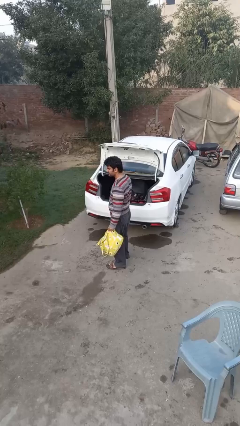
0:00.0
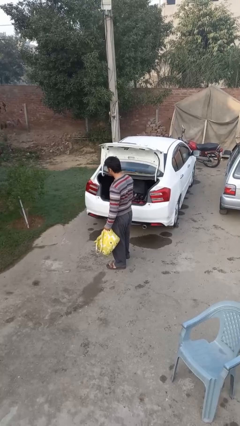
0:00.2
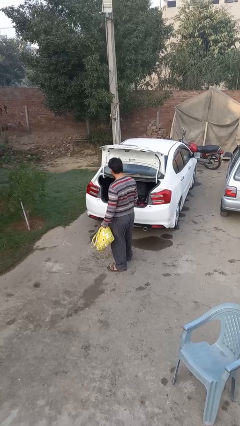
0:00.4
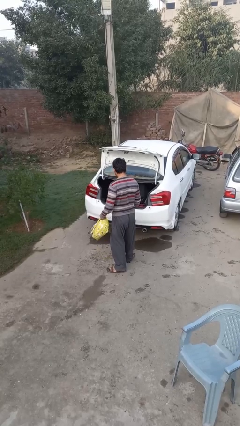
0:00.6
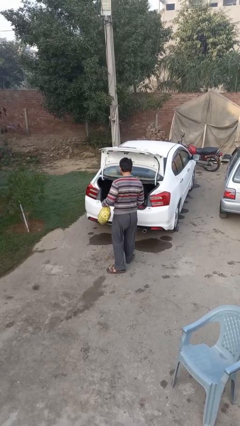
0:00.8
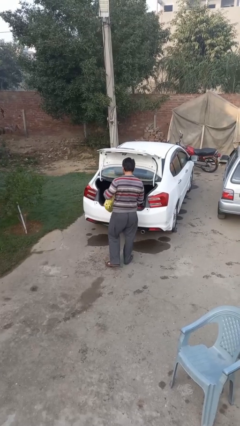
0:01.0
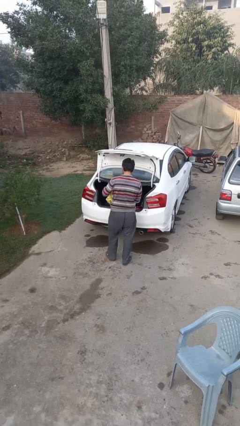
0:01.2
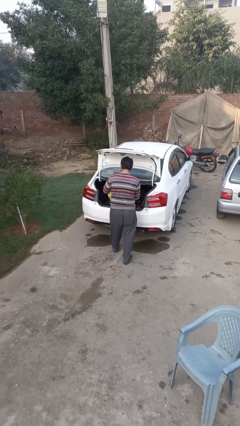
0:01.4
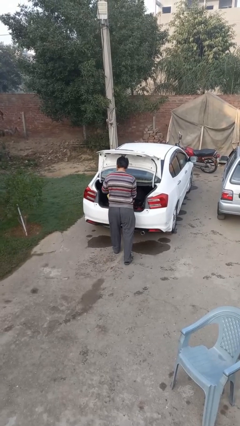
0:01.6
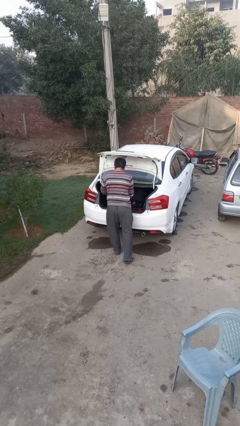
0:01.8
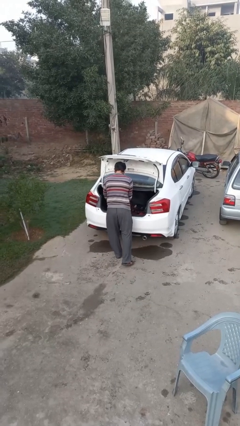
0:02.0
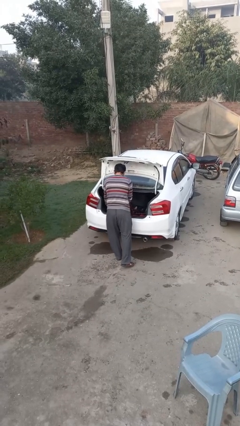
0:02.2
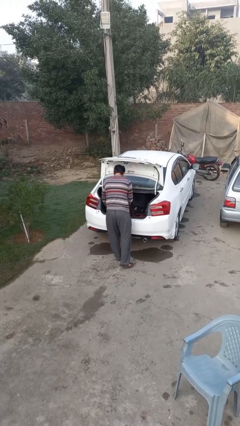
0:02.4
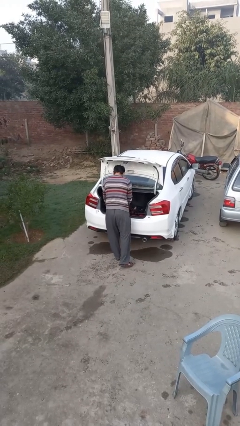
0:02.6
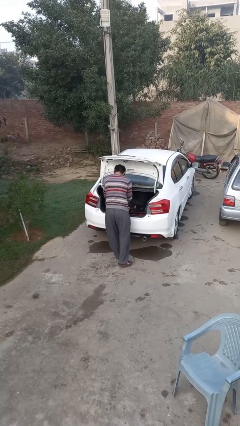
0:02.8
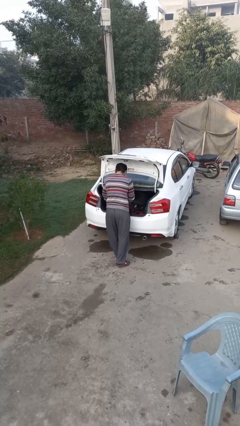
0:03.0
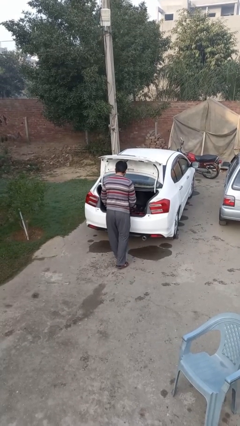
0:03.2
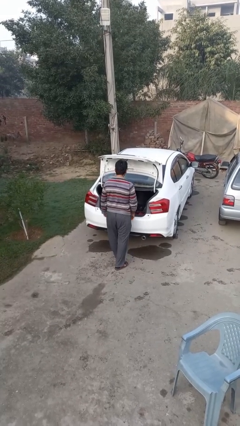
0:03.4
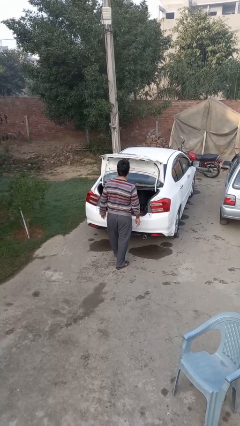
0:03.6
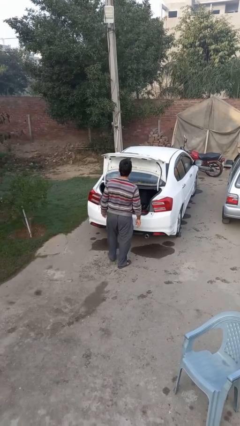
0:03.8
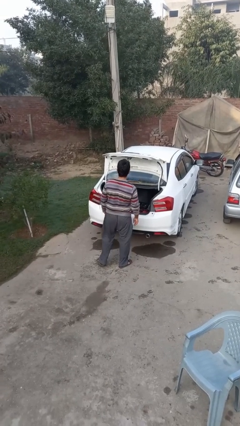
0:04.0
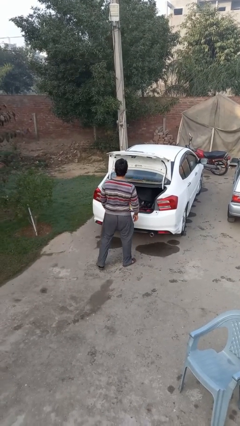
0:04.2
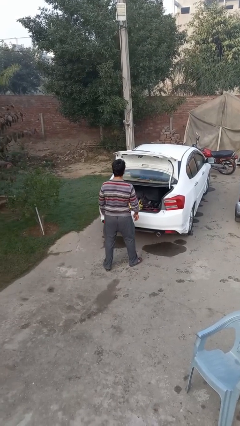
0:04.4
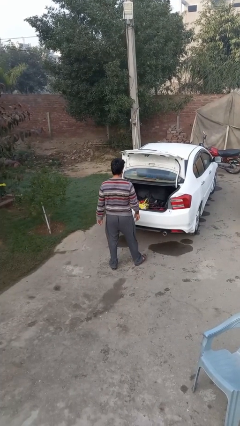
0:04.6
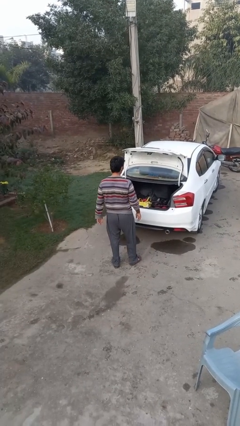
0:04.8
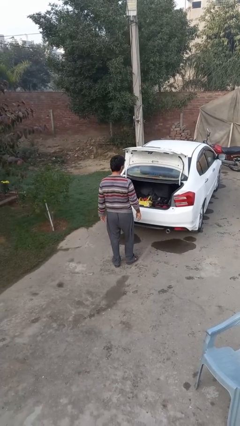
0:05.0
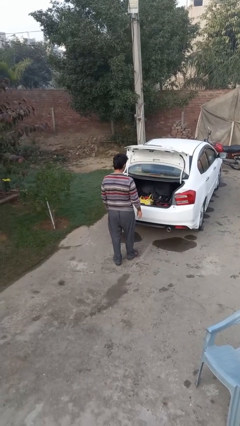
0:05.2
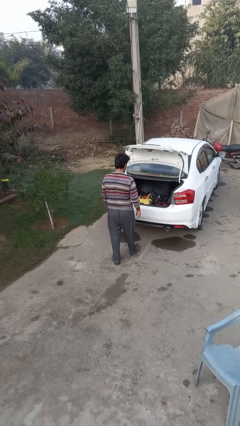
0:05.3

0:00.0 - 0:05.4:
person loads car

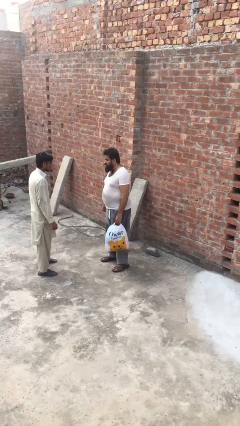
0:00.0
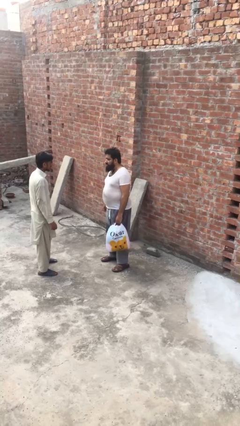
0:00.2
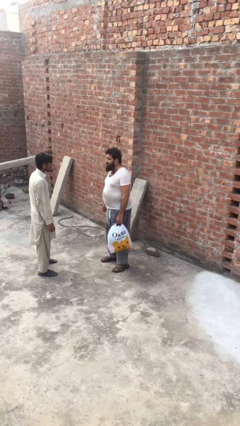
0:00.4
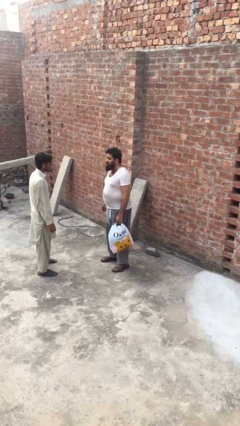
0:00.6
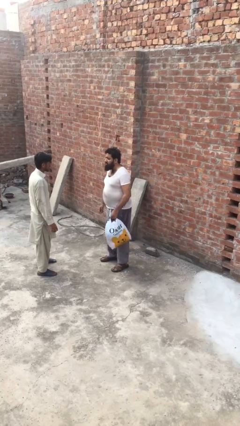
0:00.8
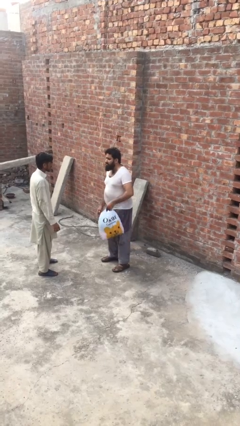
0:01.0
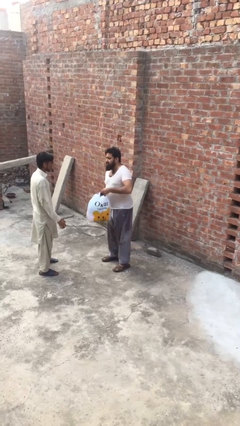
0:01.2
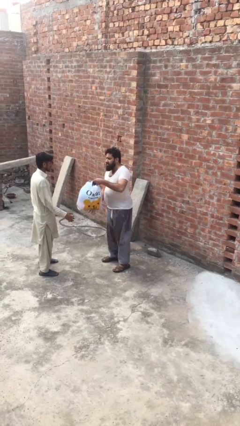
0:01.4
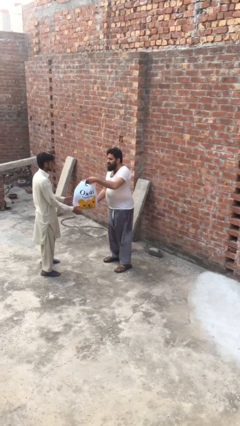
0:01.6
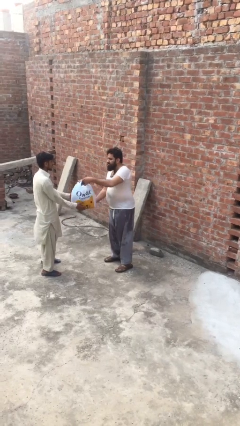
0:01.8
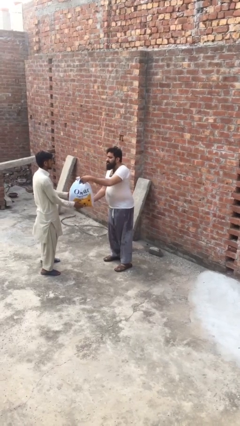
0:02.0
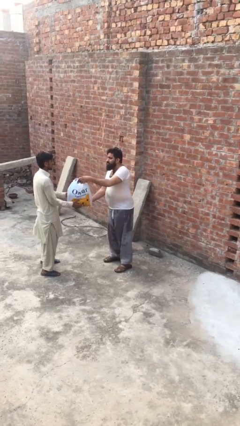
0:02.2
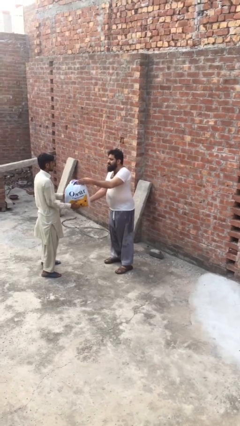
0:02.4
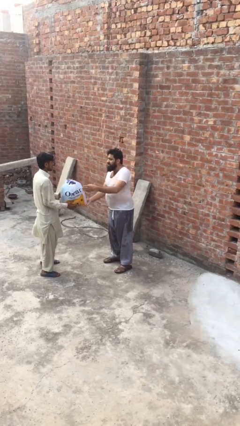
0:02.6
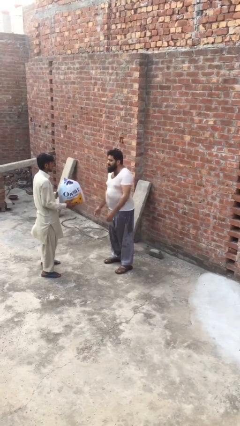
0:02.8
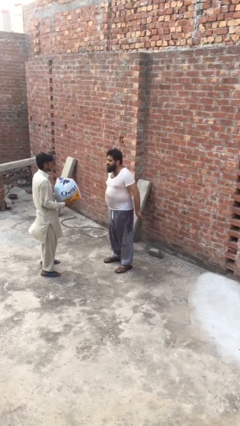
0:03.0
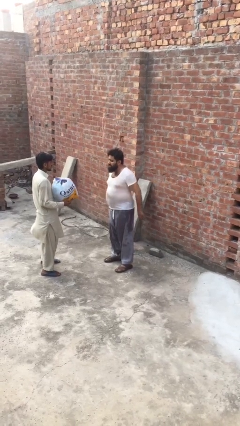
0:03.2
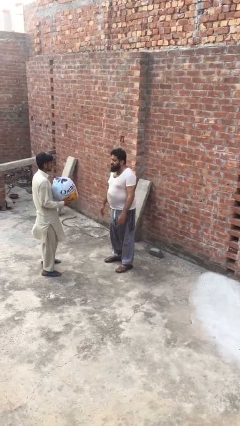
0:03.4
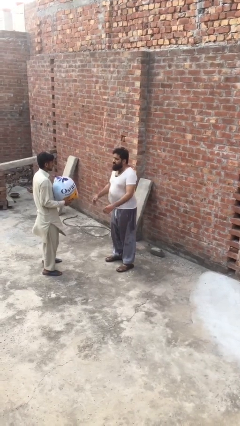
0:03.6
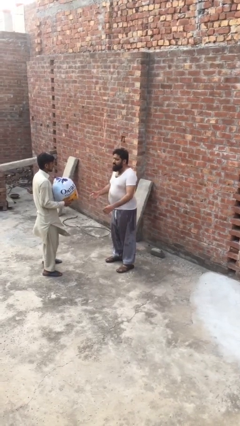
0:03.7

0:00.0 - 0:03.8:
person transfers object to person

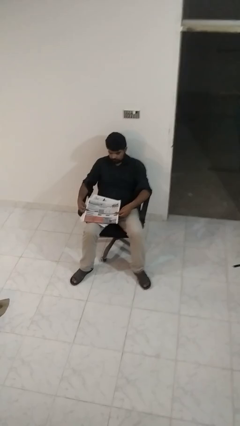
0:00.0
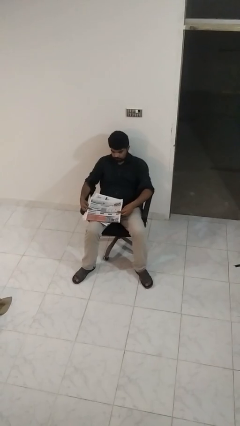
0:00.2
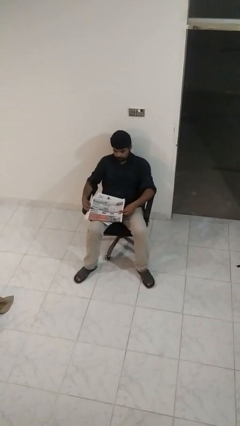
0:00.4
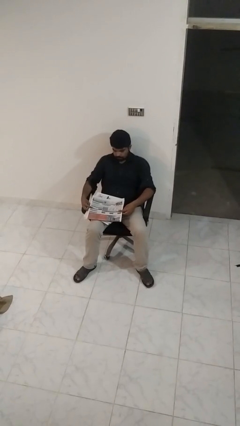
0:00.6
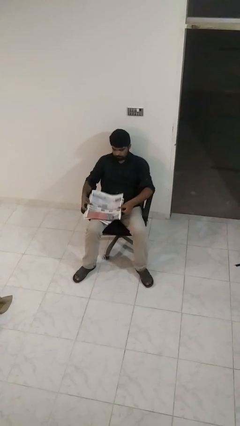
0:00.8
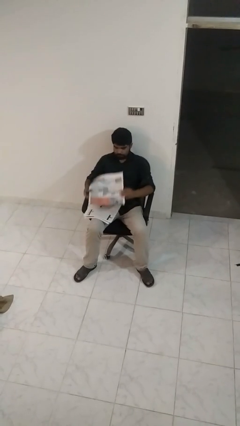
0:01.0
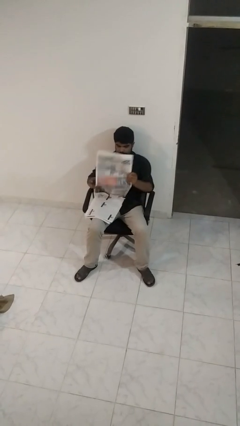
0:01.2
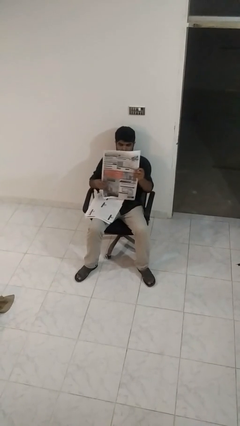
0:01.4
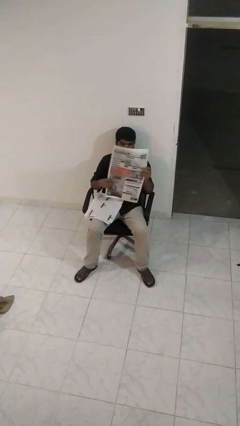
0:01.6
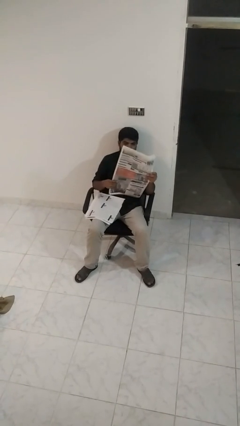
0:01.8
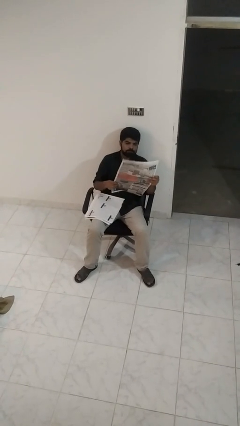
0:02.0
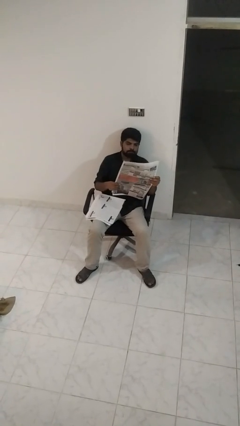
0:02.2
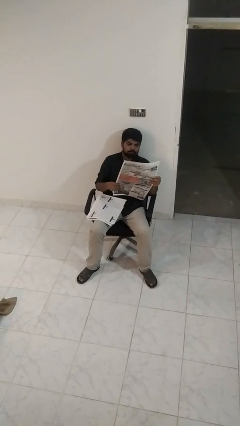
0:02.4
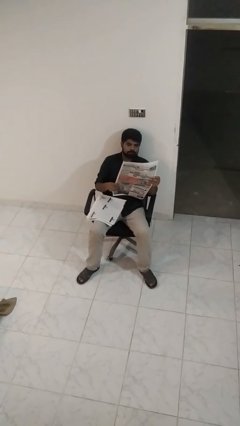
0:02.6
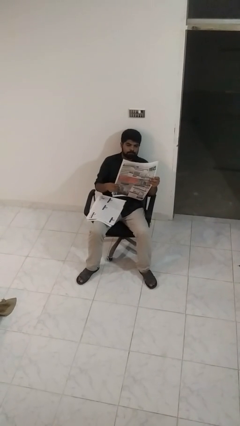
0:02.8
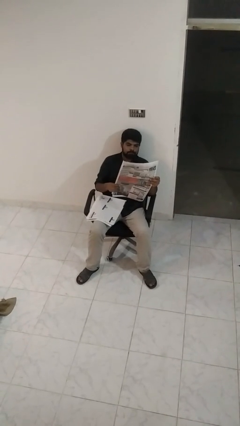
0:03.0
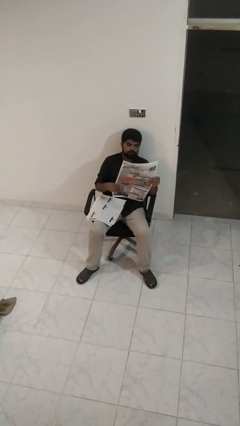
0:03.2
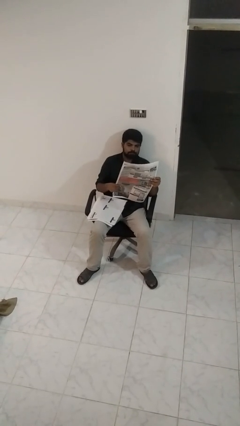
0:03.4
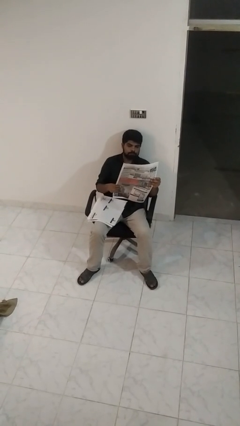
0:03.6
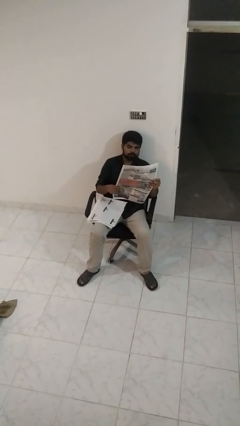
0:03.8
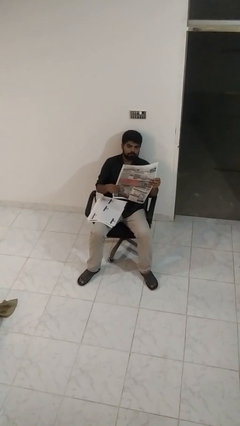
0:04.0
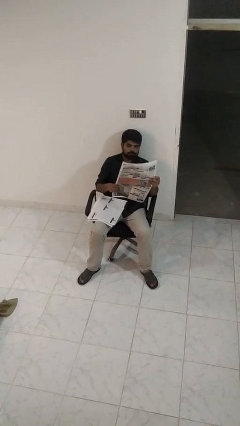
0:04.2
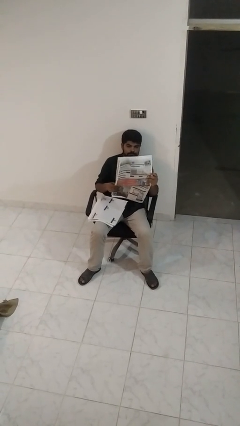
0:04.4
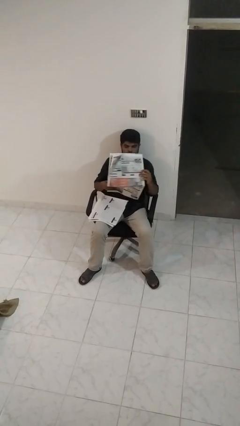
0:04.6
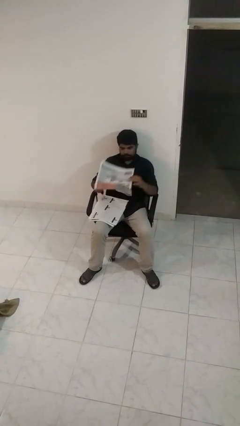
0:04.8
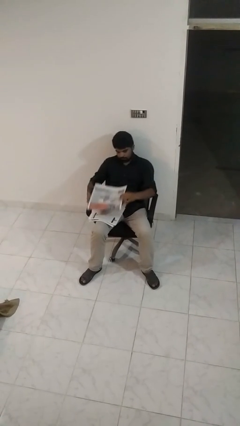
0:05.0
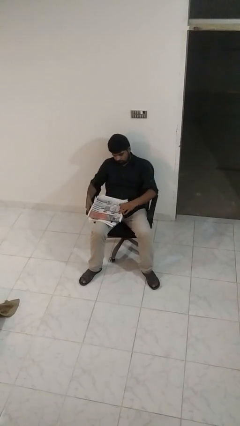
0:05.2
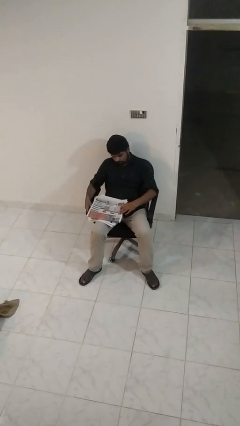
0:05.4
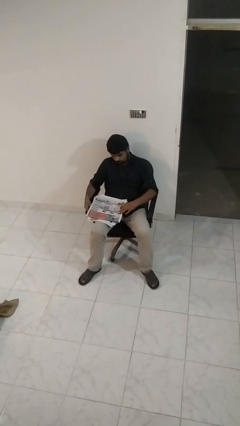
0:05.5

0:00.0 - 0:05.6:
person reads newspaper

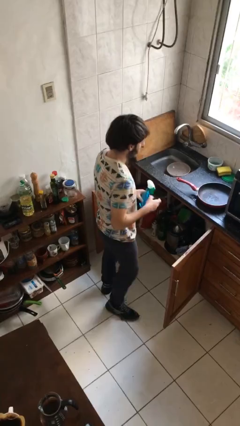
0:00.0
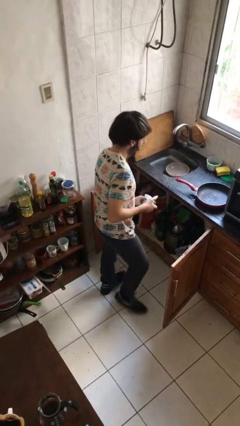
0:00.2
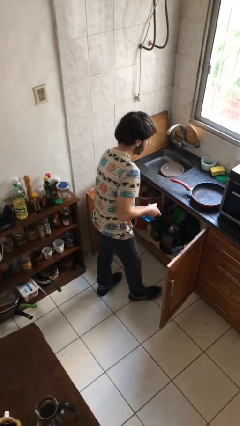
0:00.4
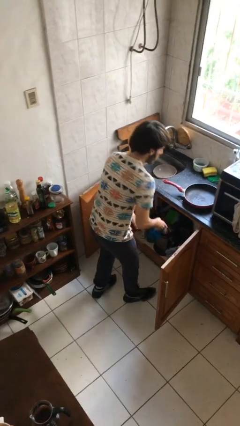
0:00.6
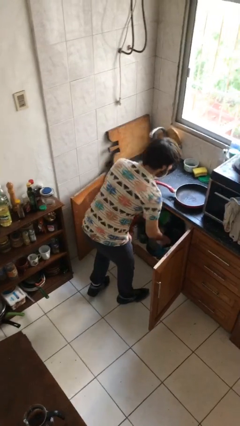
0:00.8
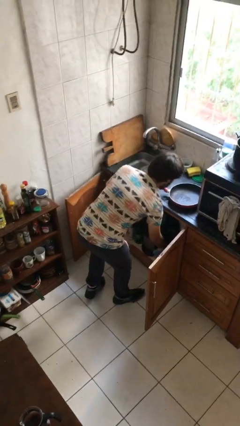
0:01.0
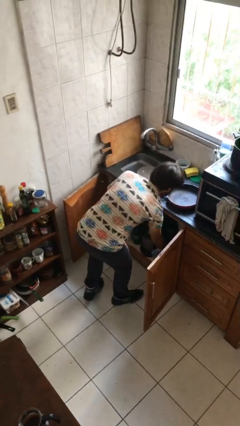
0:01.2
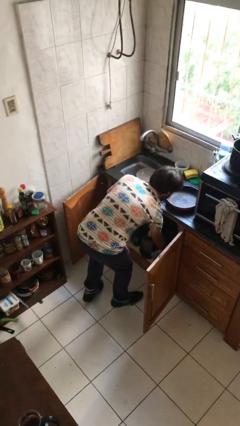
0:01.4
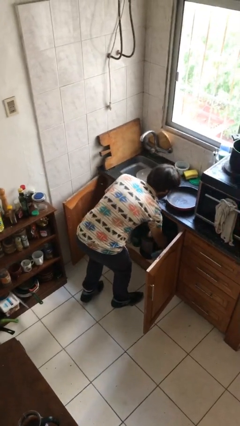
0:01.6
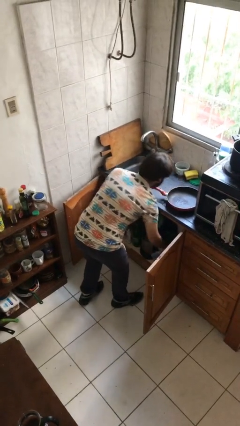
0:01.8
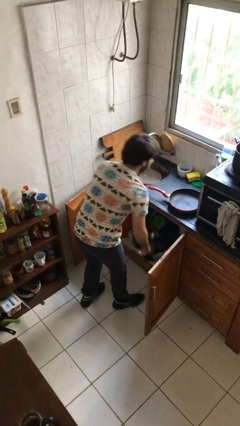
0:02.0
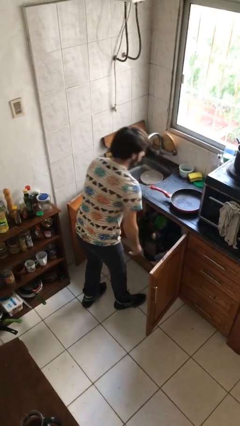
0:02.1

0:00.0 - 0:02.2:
person puts down object into cabinet

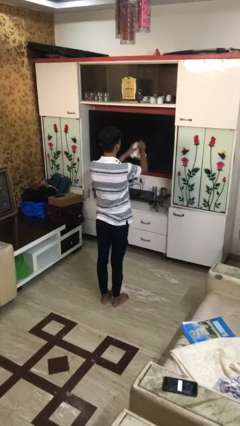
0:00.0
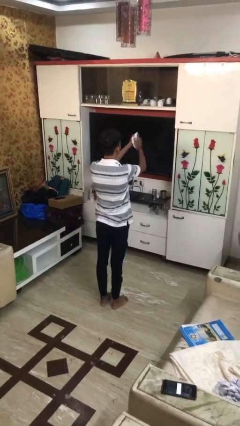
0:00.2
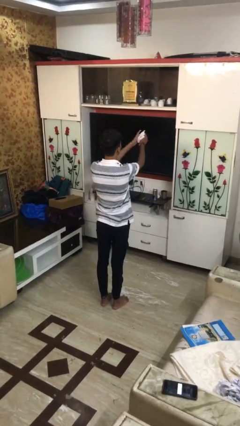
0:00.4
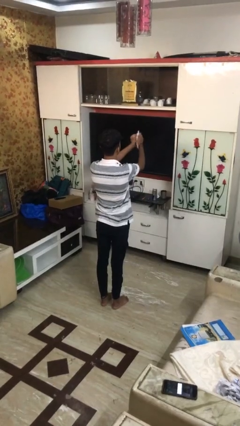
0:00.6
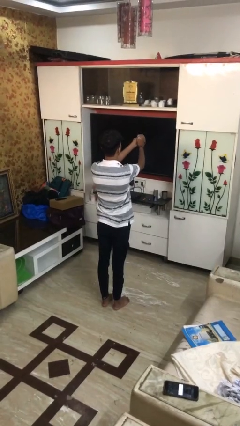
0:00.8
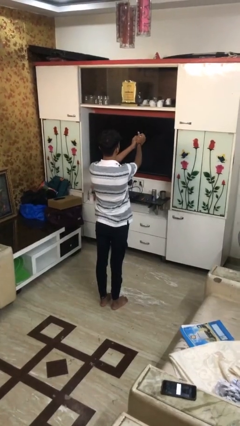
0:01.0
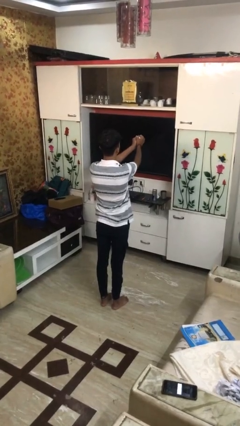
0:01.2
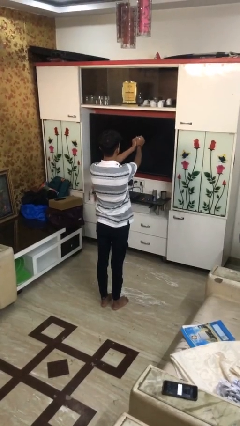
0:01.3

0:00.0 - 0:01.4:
person crumples paper
